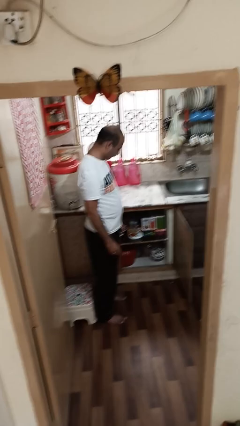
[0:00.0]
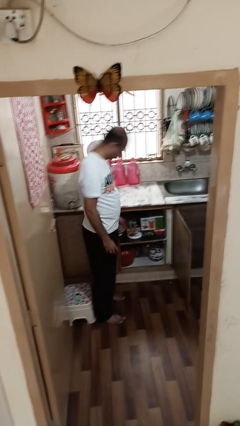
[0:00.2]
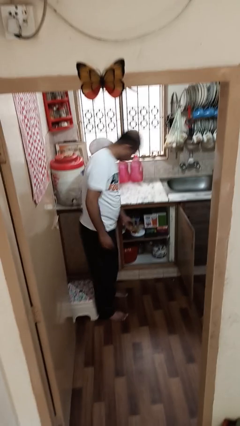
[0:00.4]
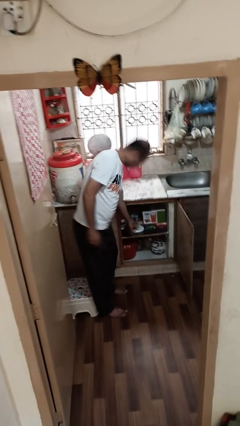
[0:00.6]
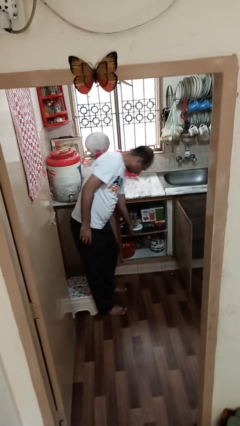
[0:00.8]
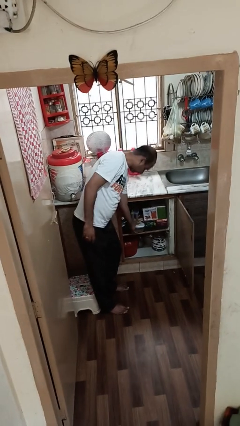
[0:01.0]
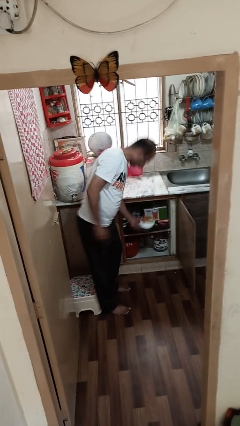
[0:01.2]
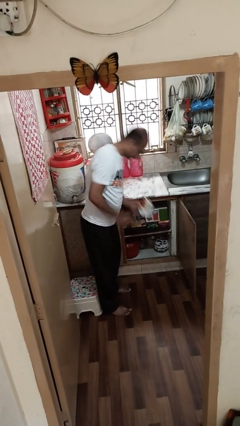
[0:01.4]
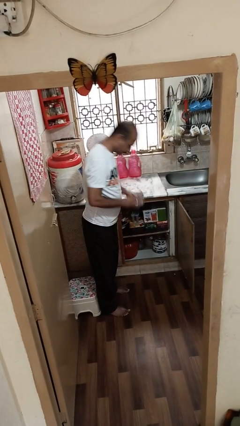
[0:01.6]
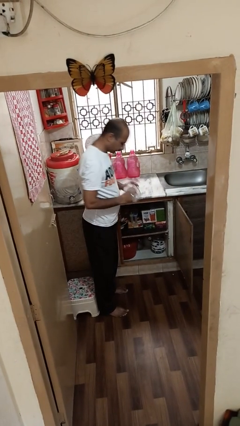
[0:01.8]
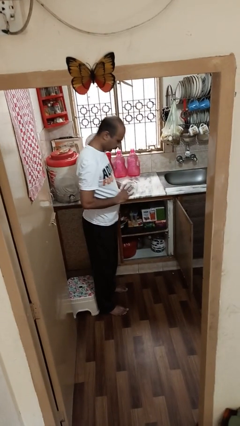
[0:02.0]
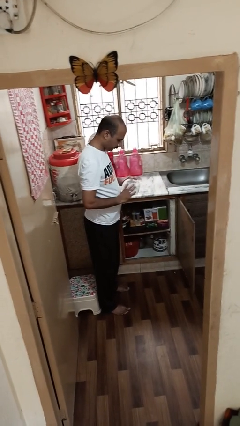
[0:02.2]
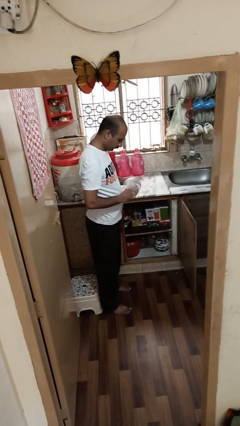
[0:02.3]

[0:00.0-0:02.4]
person picks up object from cabinet

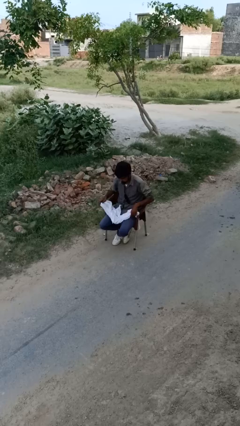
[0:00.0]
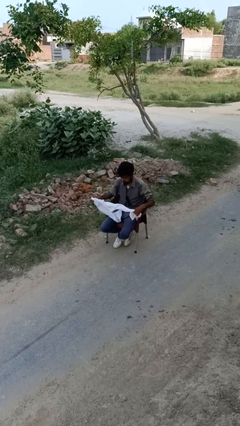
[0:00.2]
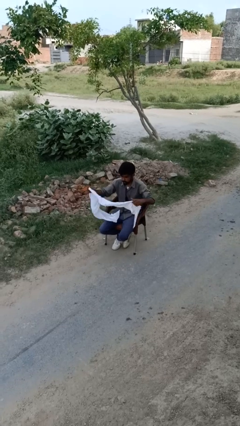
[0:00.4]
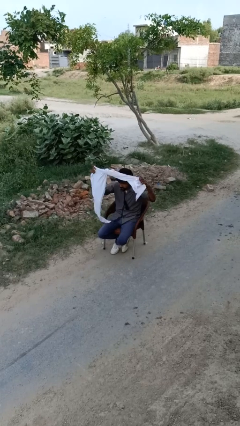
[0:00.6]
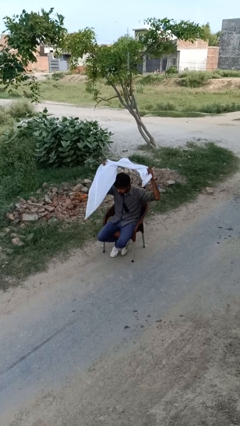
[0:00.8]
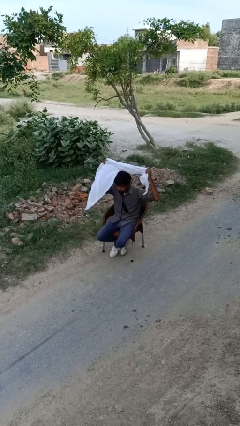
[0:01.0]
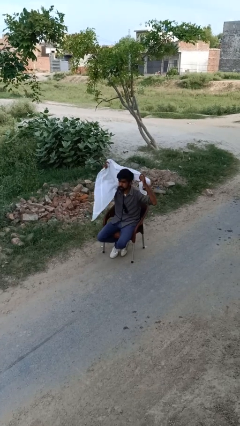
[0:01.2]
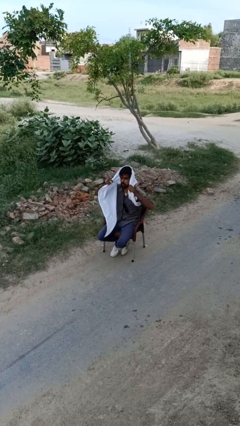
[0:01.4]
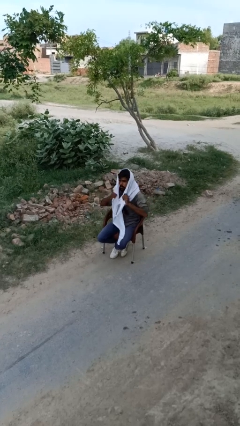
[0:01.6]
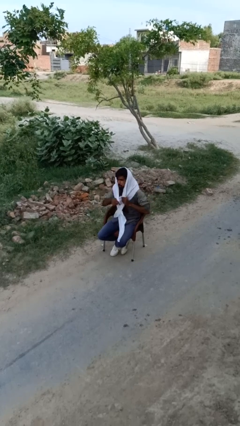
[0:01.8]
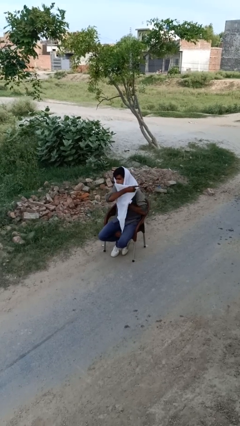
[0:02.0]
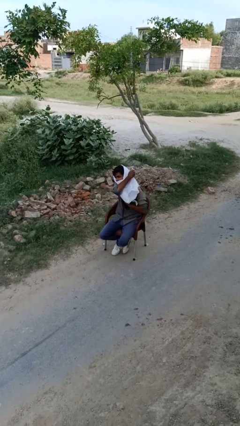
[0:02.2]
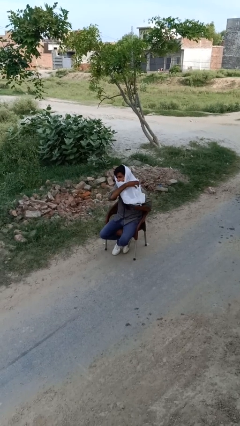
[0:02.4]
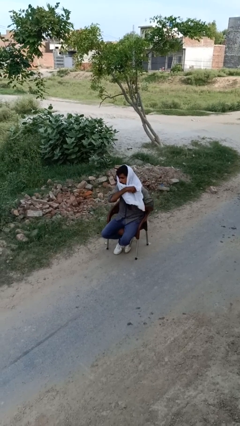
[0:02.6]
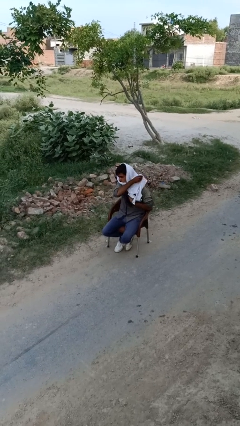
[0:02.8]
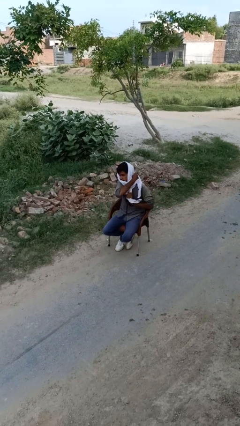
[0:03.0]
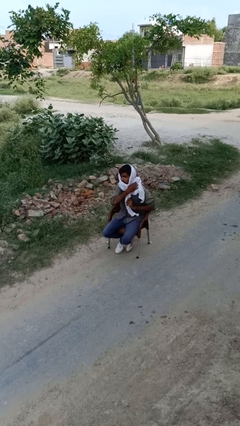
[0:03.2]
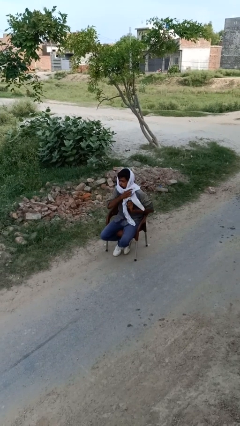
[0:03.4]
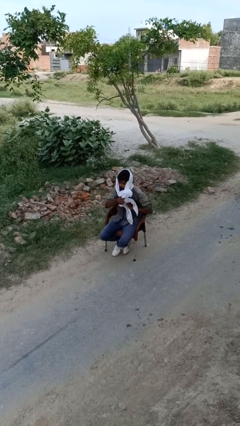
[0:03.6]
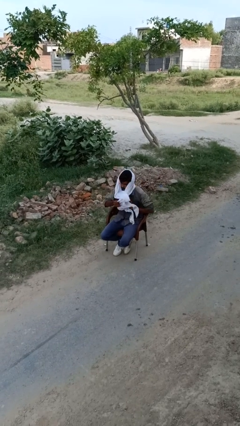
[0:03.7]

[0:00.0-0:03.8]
person puts on scarf

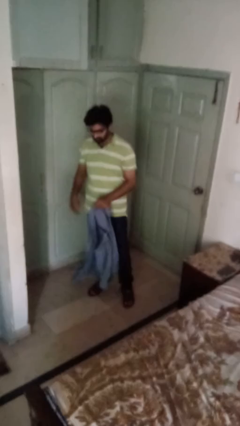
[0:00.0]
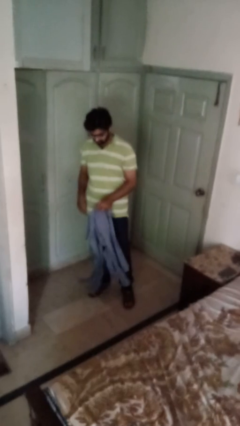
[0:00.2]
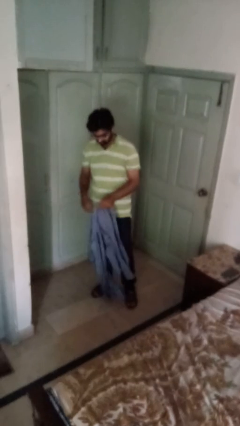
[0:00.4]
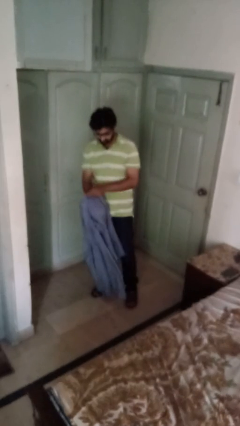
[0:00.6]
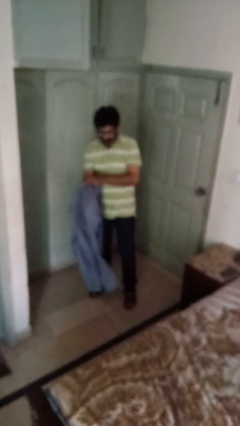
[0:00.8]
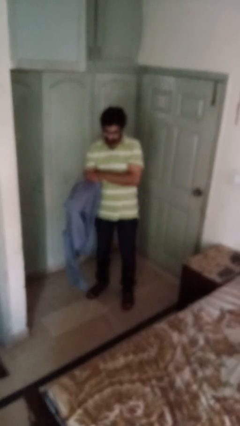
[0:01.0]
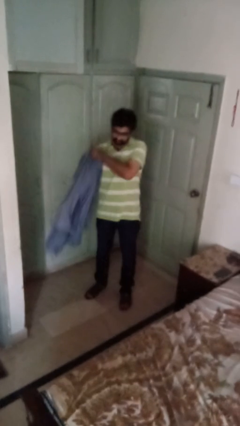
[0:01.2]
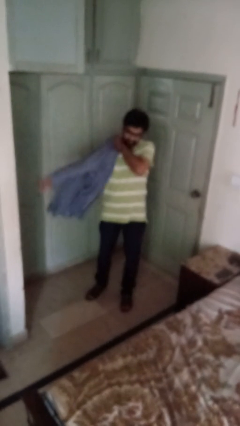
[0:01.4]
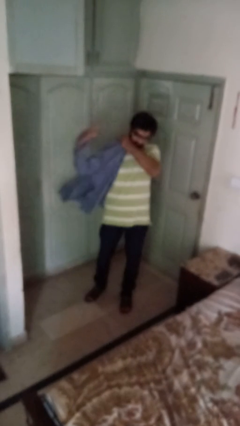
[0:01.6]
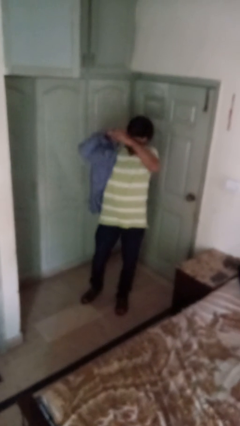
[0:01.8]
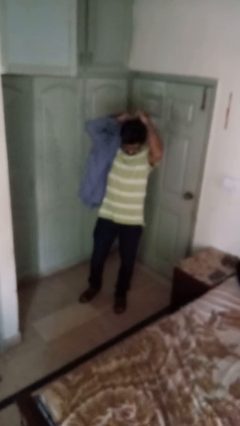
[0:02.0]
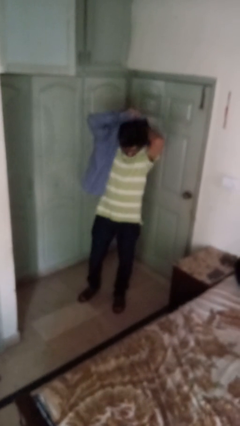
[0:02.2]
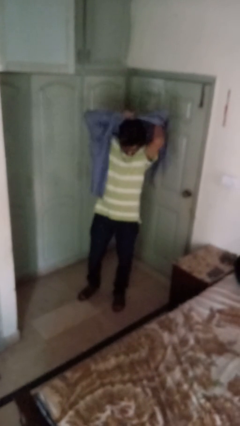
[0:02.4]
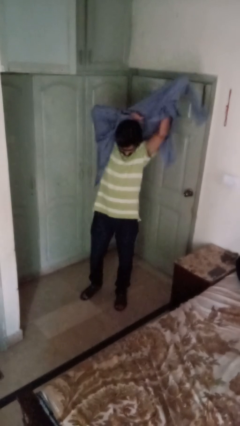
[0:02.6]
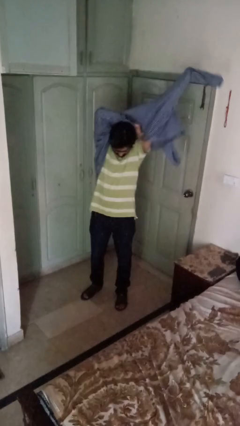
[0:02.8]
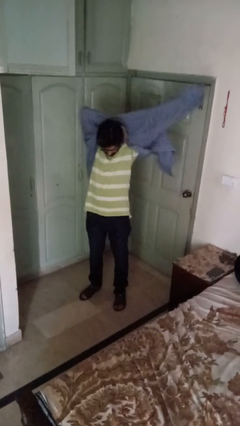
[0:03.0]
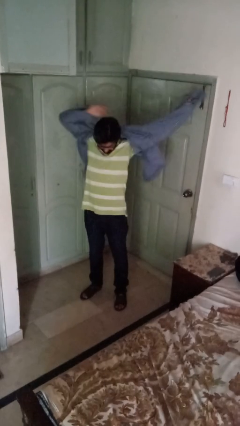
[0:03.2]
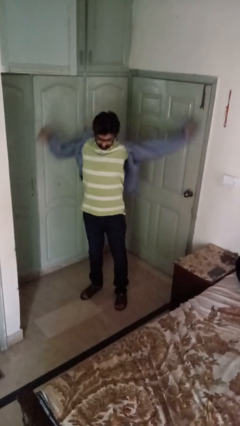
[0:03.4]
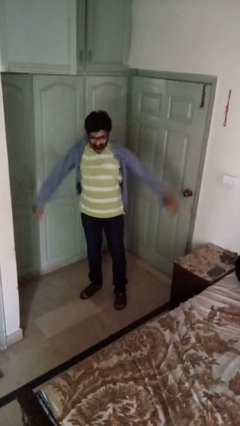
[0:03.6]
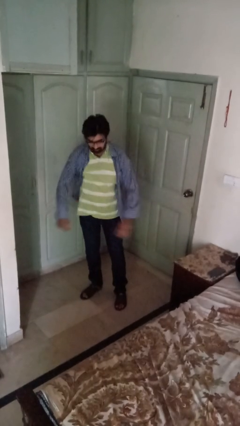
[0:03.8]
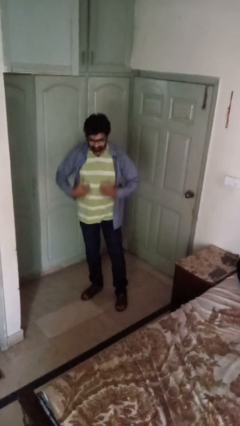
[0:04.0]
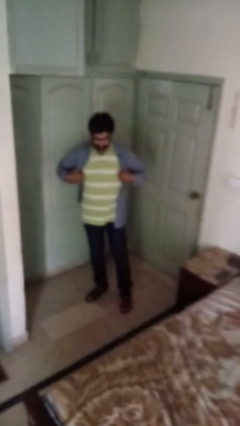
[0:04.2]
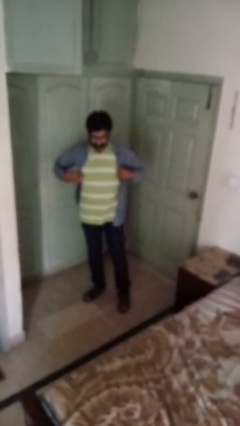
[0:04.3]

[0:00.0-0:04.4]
person puts on shirt

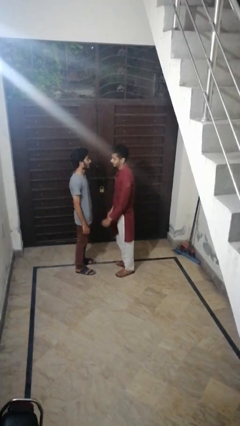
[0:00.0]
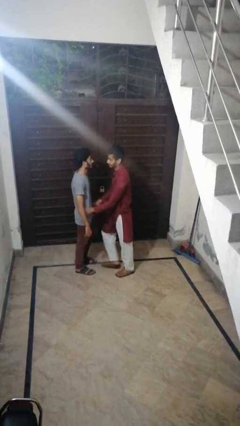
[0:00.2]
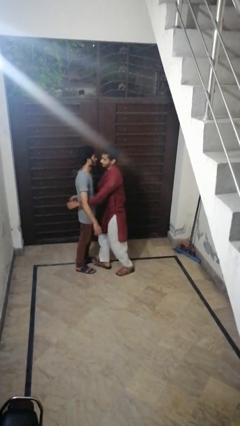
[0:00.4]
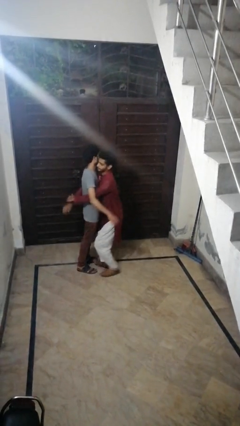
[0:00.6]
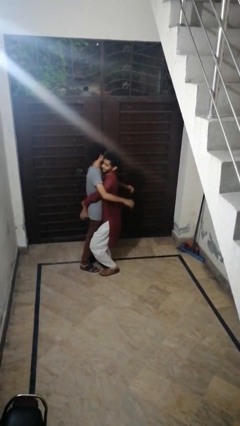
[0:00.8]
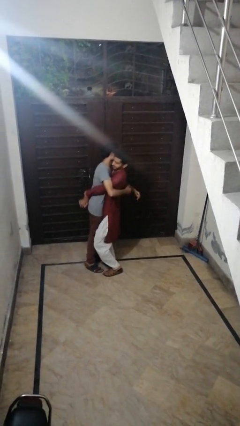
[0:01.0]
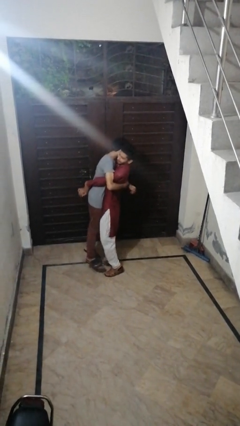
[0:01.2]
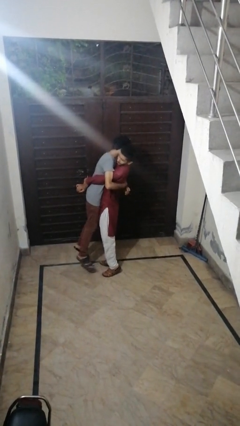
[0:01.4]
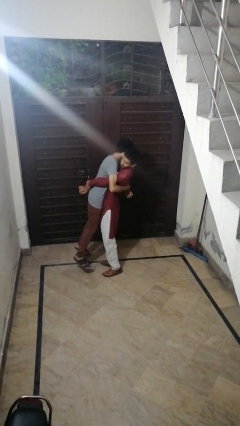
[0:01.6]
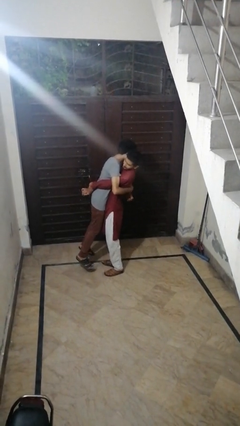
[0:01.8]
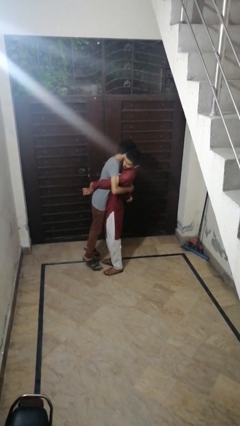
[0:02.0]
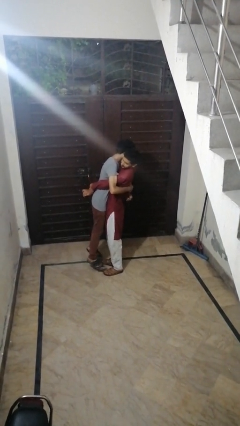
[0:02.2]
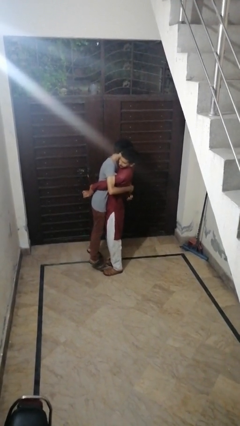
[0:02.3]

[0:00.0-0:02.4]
person picks up person

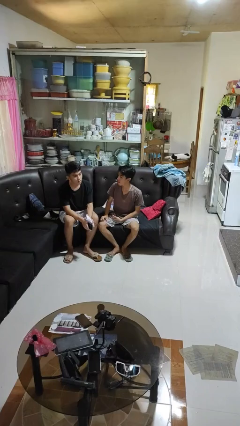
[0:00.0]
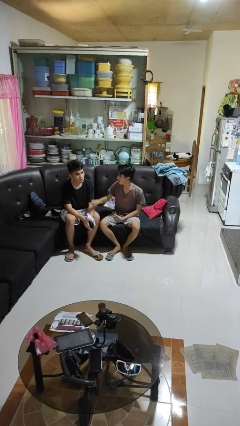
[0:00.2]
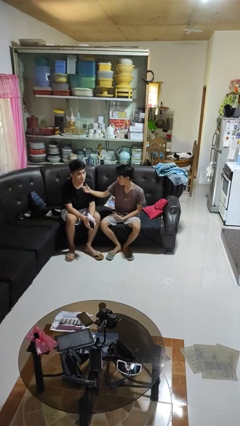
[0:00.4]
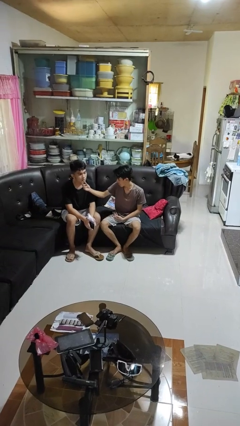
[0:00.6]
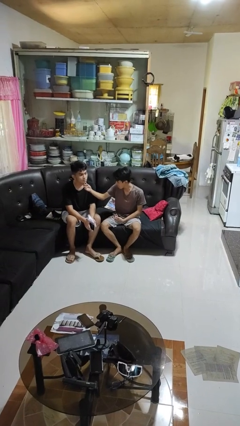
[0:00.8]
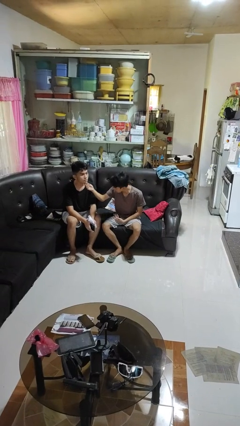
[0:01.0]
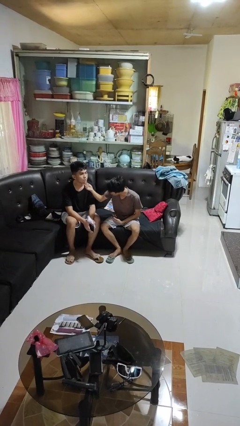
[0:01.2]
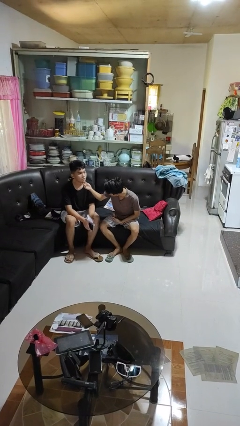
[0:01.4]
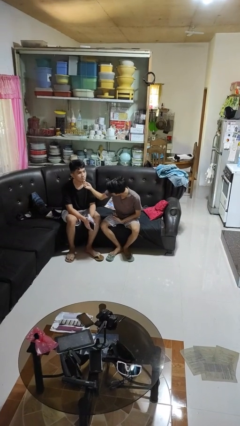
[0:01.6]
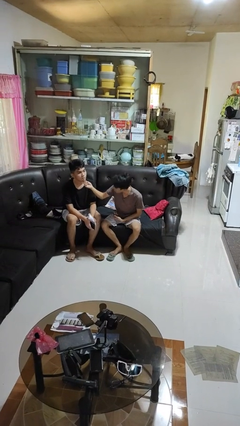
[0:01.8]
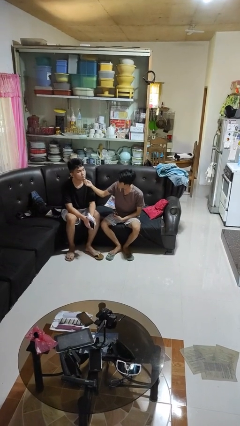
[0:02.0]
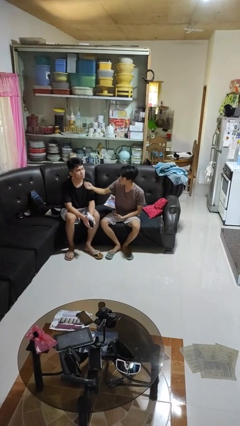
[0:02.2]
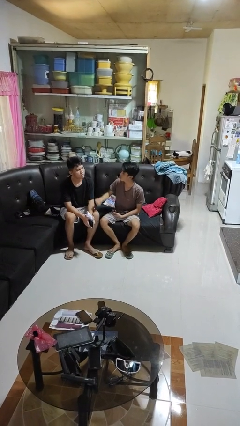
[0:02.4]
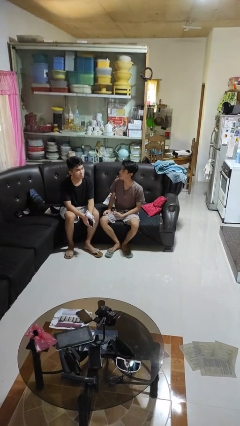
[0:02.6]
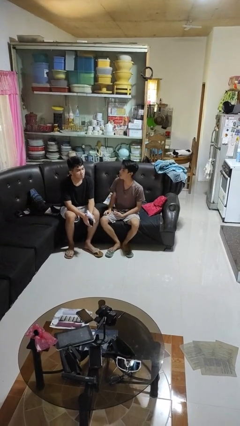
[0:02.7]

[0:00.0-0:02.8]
person touches face of person

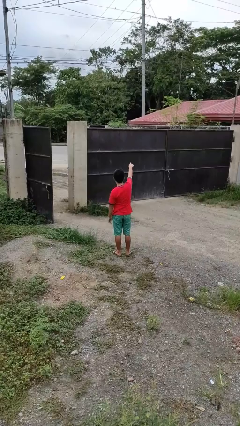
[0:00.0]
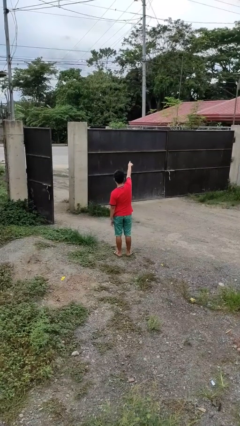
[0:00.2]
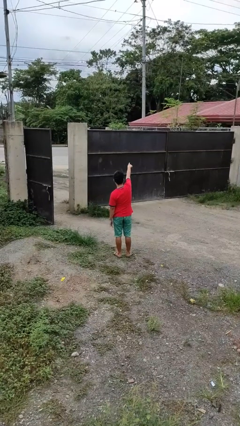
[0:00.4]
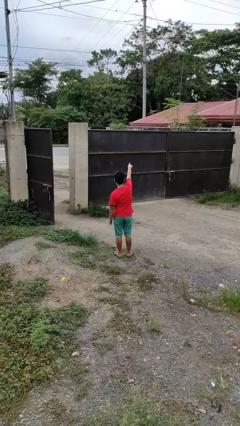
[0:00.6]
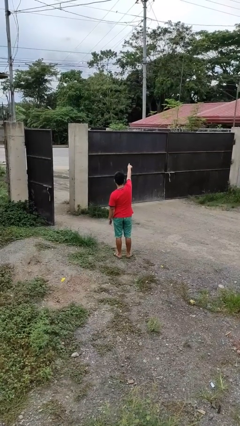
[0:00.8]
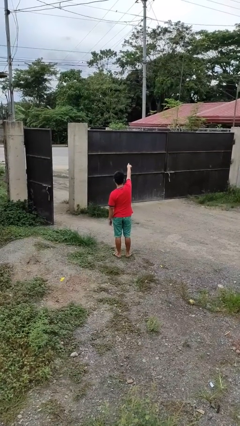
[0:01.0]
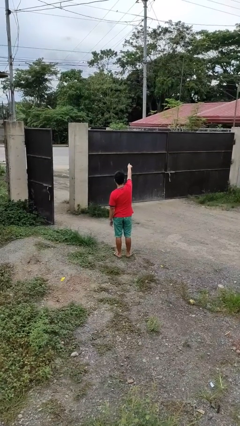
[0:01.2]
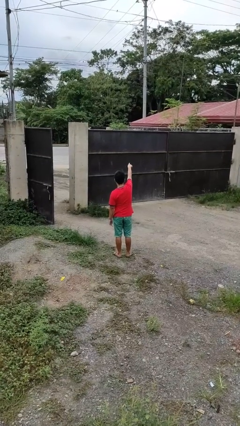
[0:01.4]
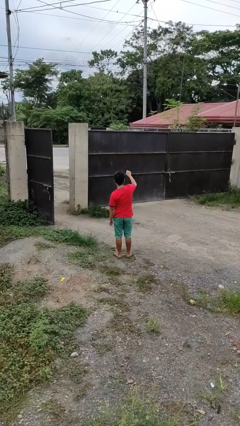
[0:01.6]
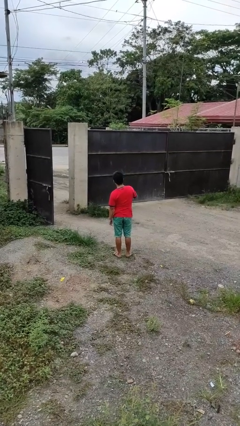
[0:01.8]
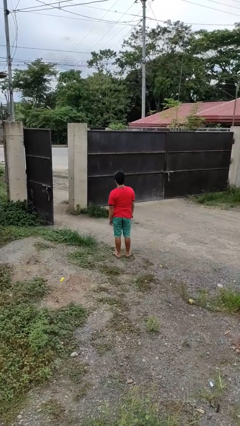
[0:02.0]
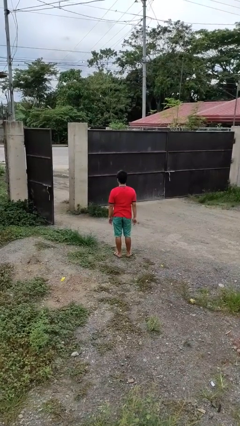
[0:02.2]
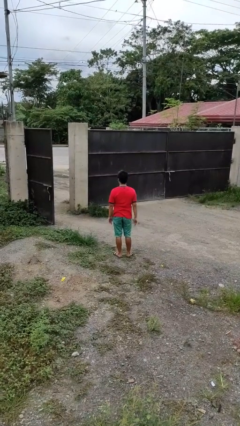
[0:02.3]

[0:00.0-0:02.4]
person points at person
